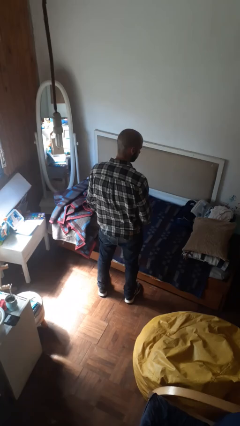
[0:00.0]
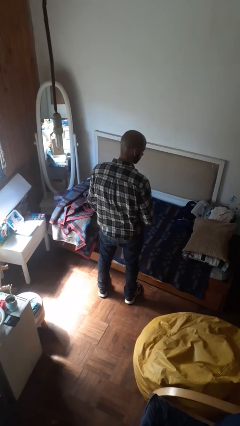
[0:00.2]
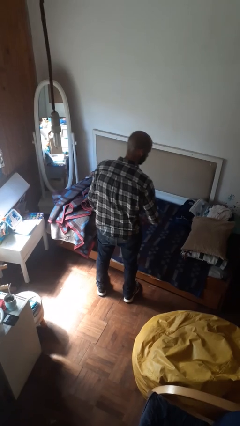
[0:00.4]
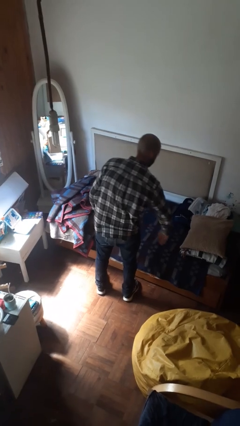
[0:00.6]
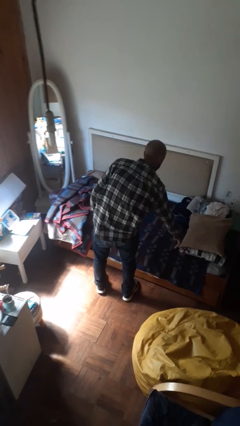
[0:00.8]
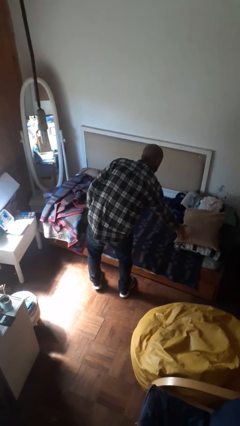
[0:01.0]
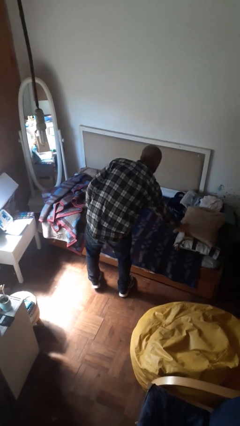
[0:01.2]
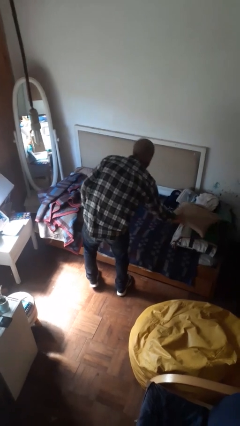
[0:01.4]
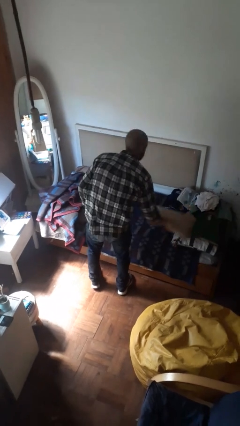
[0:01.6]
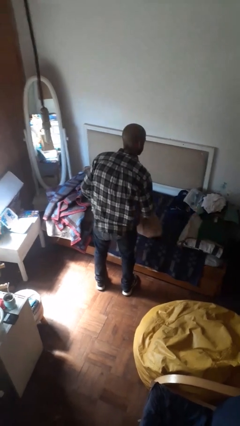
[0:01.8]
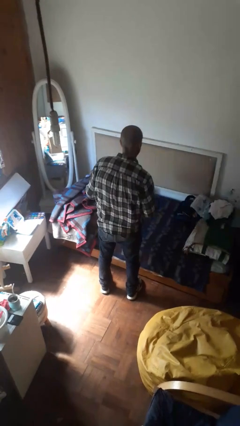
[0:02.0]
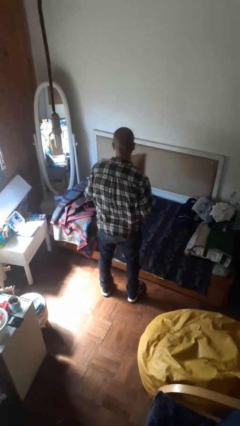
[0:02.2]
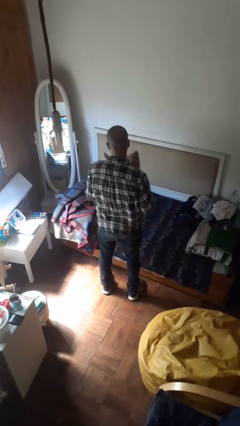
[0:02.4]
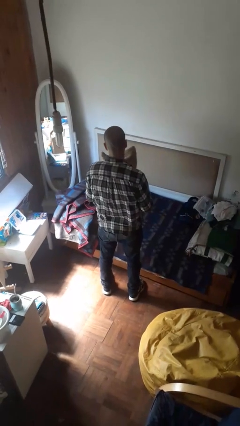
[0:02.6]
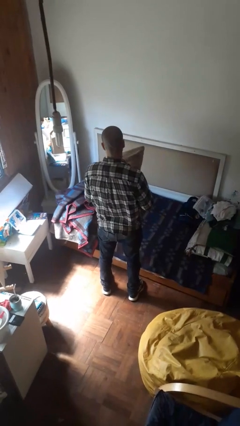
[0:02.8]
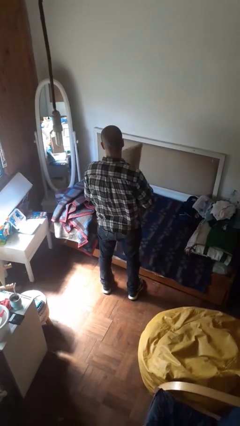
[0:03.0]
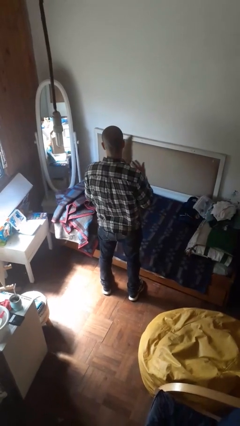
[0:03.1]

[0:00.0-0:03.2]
person picks up object from bed

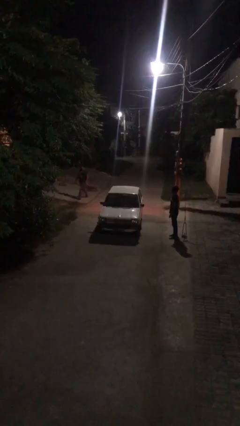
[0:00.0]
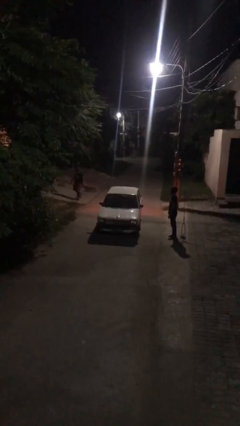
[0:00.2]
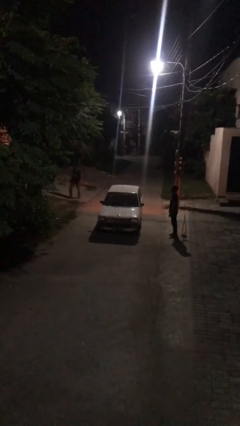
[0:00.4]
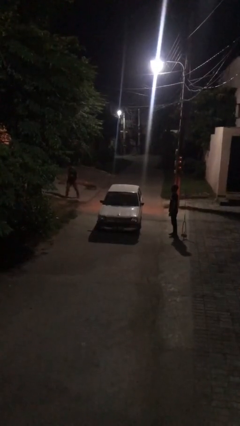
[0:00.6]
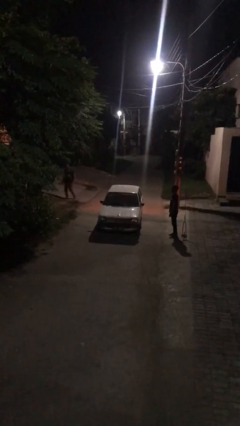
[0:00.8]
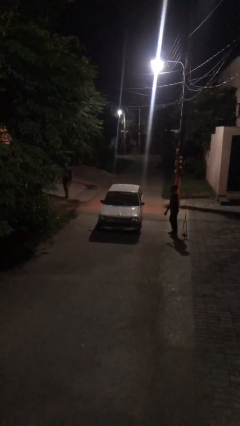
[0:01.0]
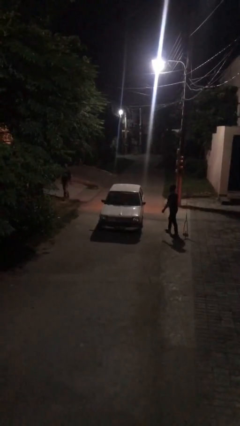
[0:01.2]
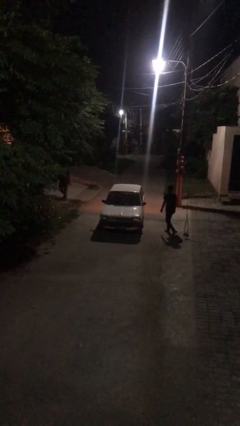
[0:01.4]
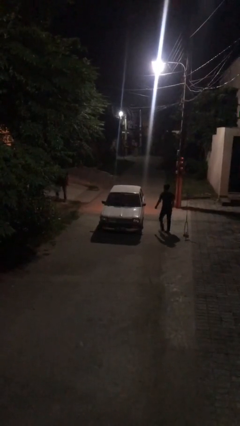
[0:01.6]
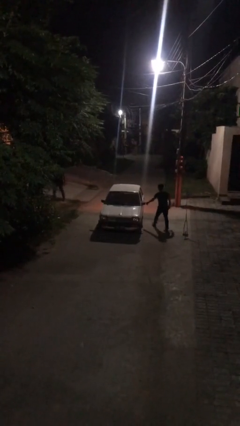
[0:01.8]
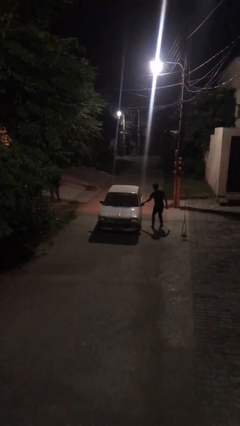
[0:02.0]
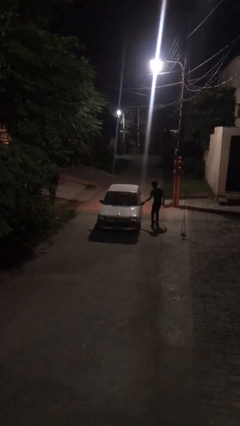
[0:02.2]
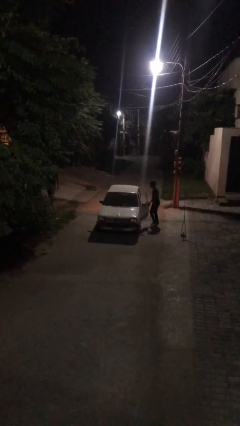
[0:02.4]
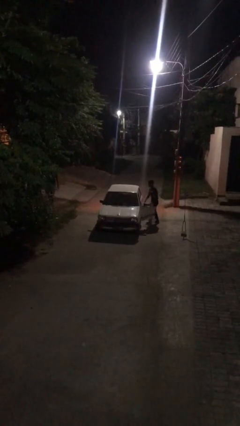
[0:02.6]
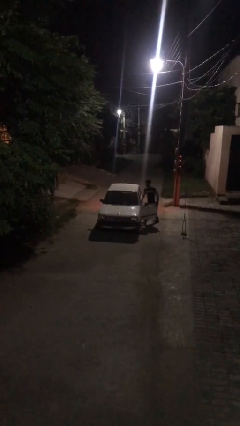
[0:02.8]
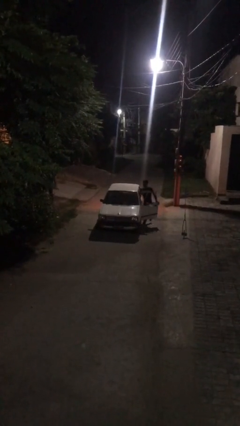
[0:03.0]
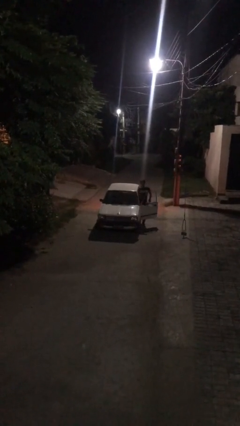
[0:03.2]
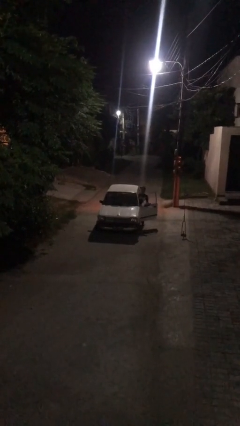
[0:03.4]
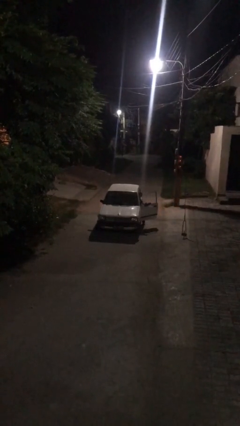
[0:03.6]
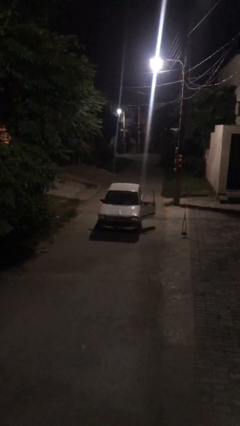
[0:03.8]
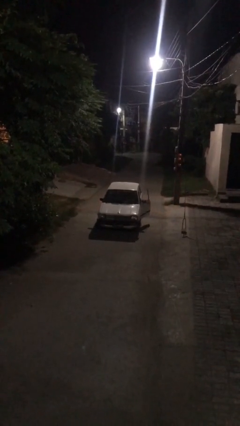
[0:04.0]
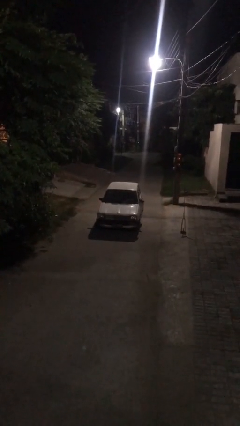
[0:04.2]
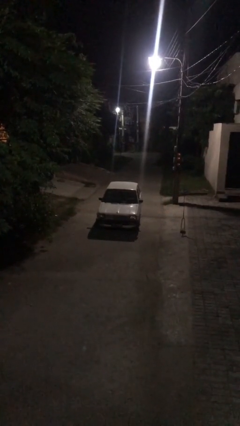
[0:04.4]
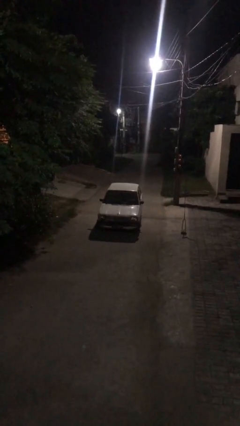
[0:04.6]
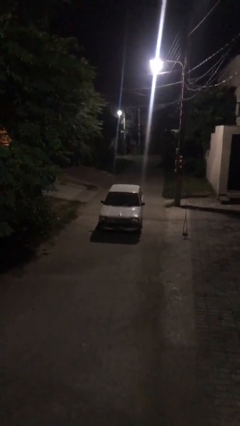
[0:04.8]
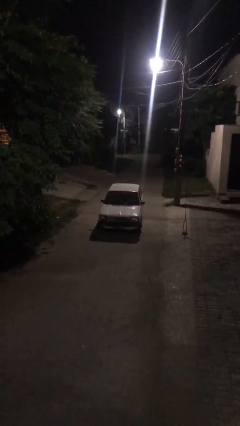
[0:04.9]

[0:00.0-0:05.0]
car picks up person

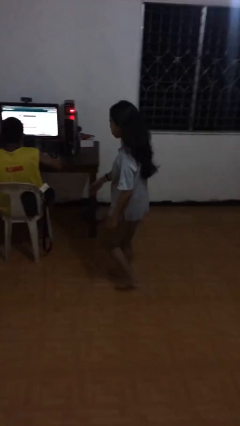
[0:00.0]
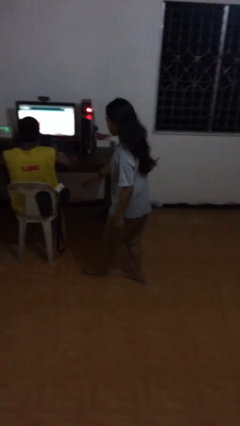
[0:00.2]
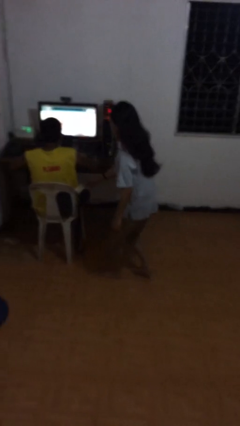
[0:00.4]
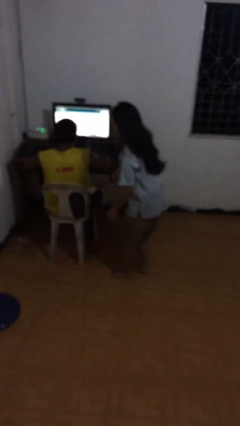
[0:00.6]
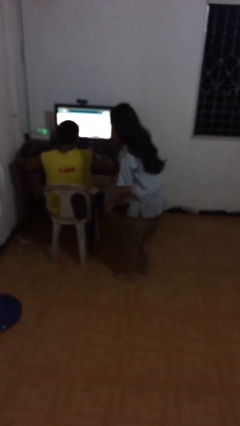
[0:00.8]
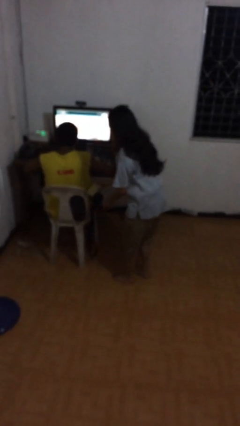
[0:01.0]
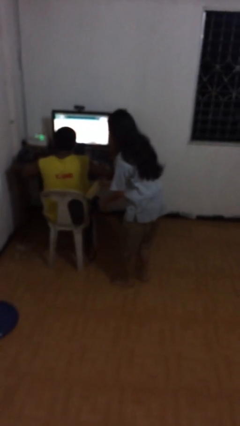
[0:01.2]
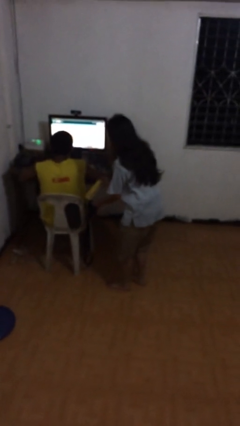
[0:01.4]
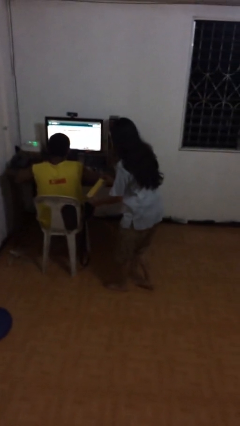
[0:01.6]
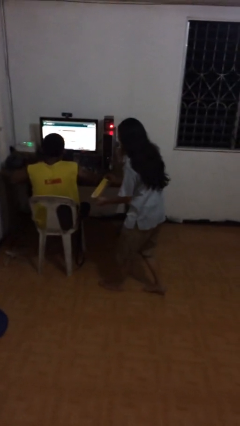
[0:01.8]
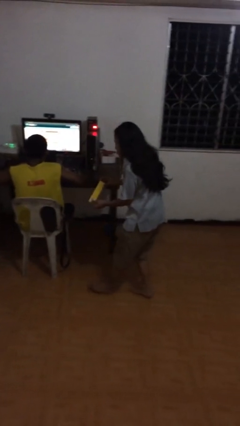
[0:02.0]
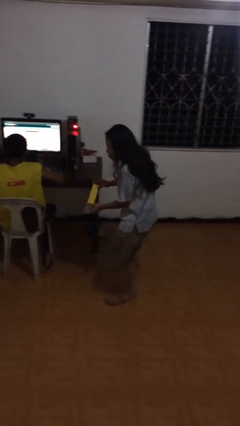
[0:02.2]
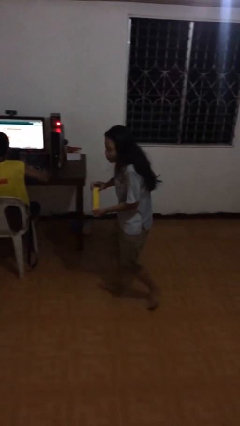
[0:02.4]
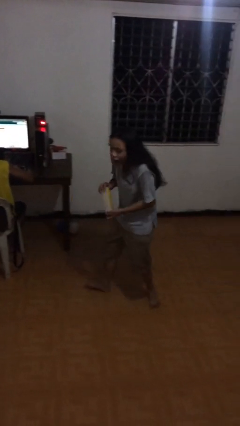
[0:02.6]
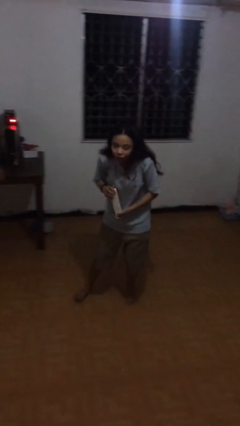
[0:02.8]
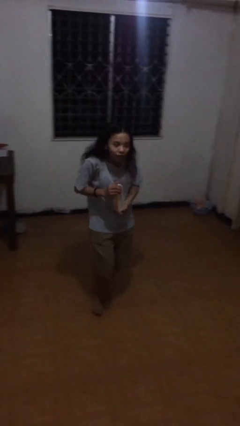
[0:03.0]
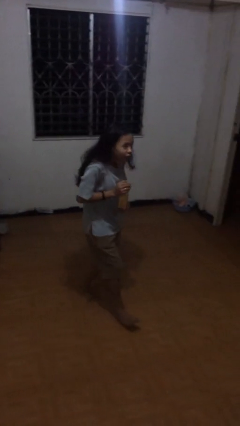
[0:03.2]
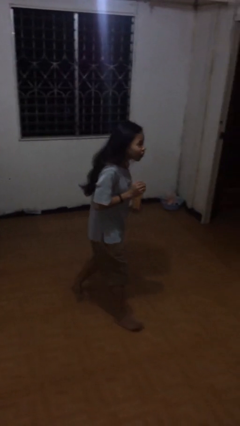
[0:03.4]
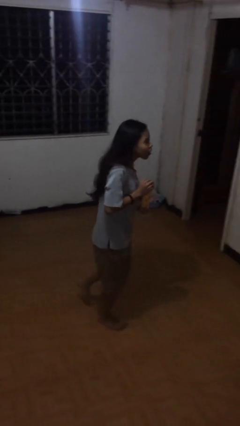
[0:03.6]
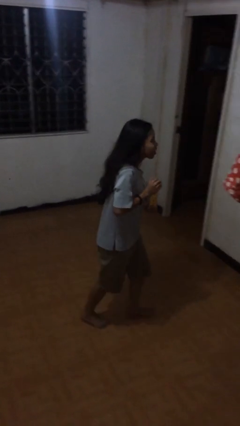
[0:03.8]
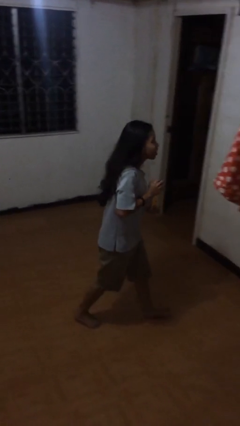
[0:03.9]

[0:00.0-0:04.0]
person steals object from person

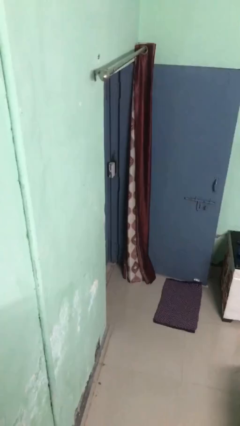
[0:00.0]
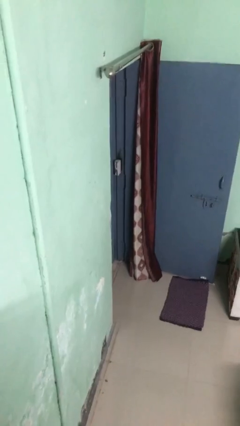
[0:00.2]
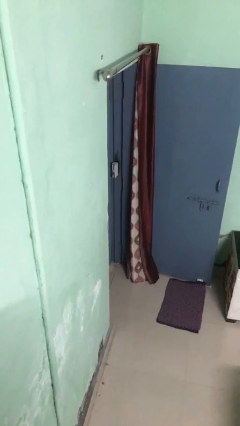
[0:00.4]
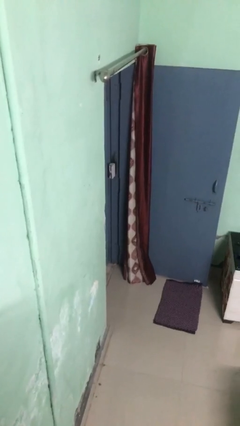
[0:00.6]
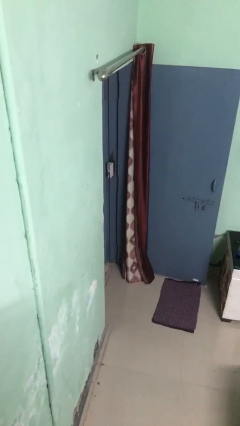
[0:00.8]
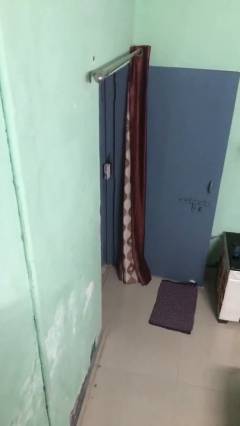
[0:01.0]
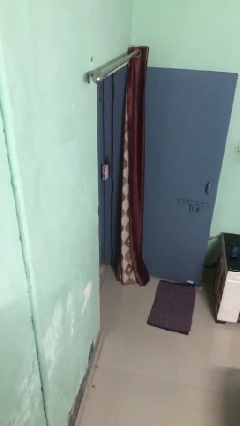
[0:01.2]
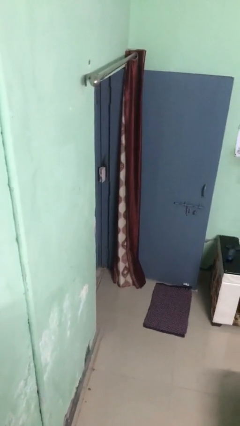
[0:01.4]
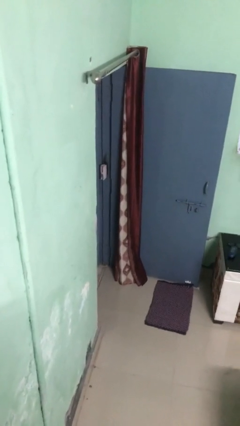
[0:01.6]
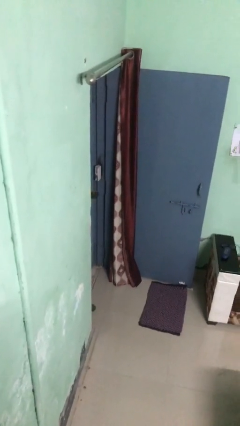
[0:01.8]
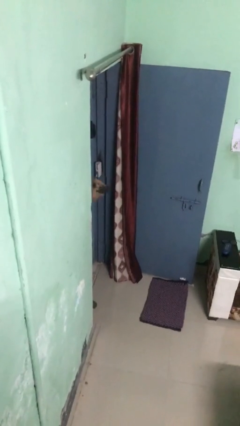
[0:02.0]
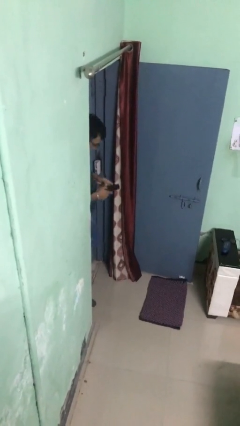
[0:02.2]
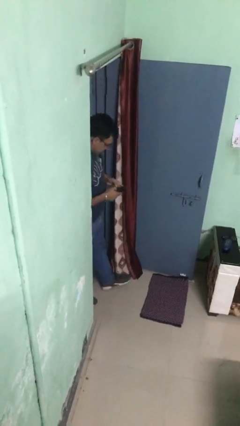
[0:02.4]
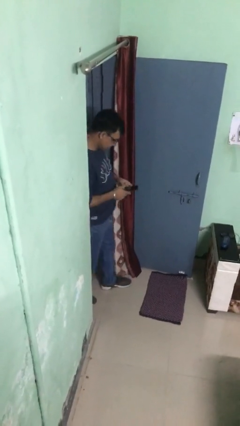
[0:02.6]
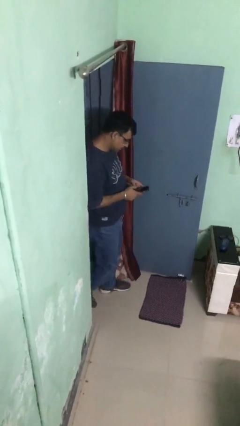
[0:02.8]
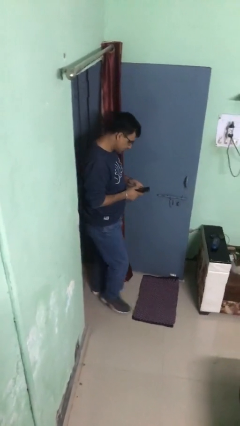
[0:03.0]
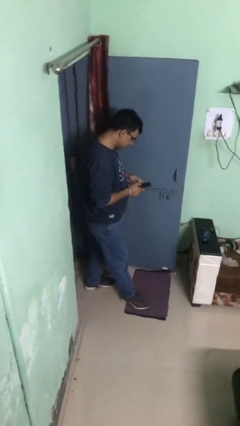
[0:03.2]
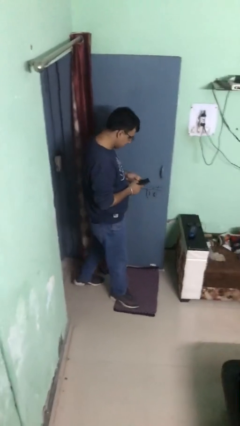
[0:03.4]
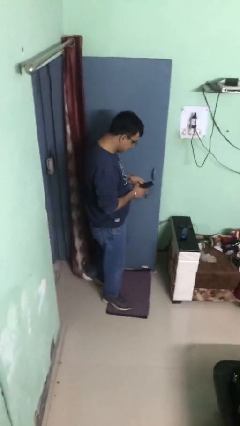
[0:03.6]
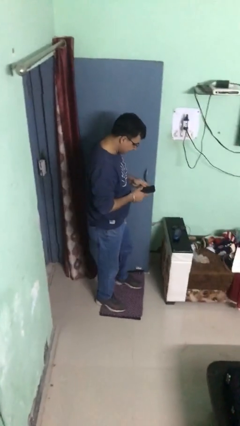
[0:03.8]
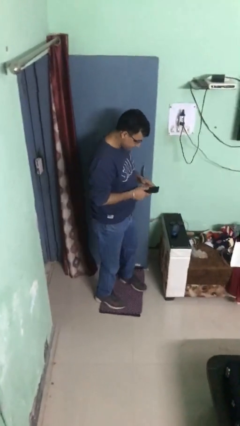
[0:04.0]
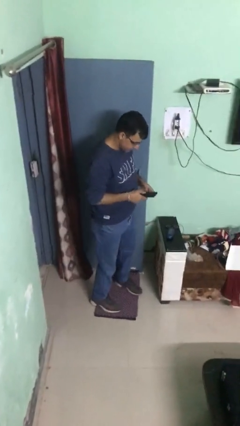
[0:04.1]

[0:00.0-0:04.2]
person enters scene through structure

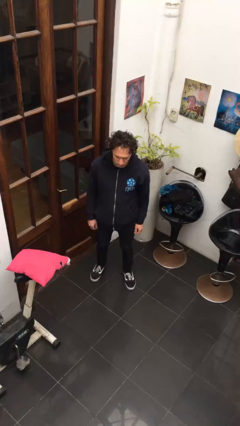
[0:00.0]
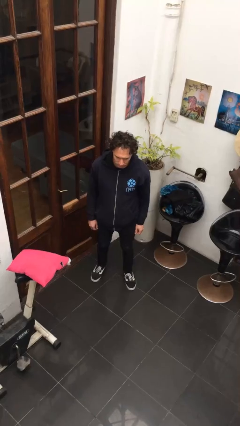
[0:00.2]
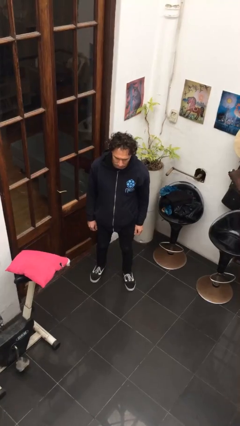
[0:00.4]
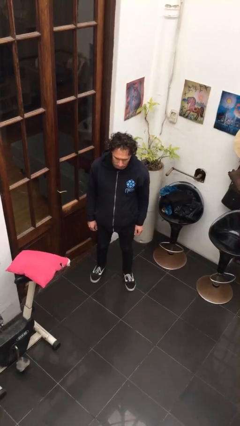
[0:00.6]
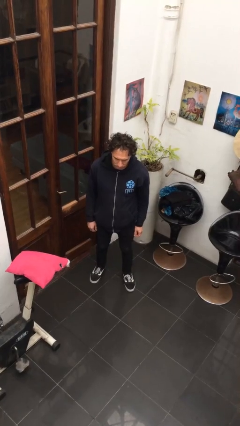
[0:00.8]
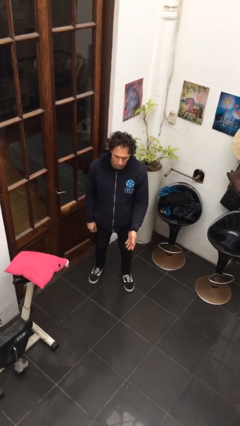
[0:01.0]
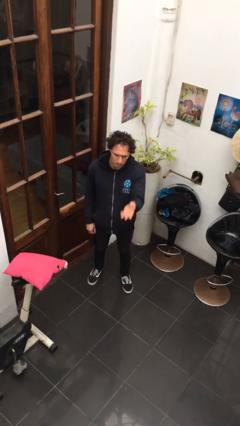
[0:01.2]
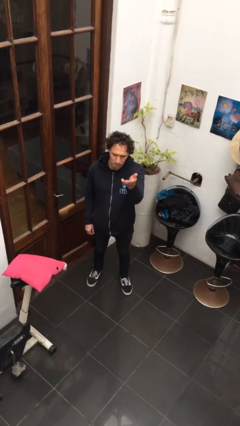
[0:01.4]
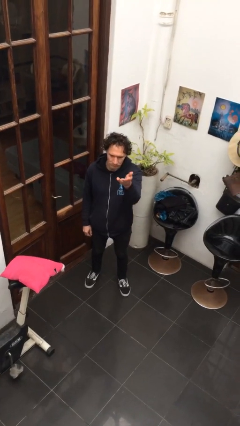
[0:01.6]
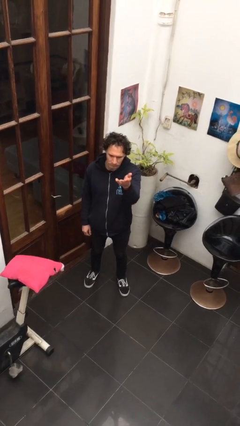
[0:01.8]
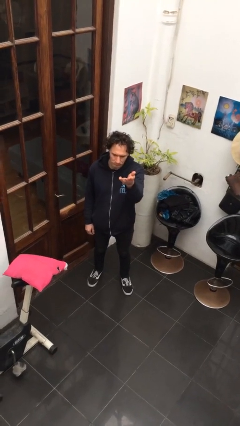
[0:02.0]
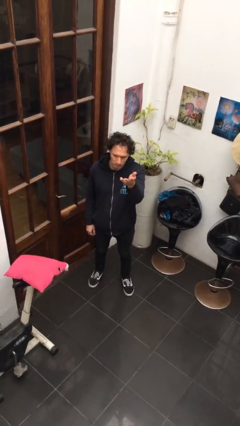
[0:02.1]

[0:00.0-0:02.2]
person gestures swipe up
